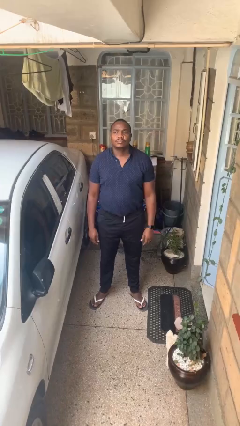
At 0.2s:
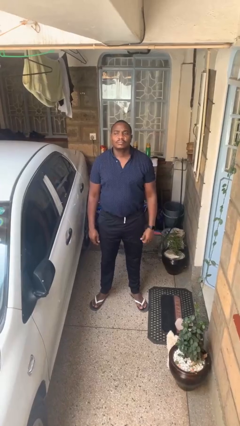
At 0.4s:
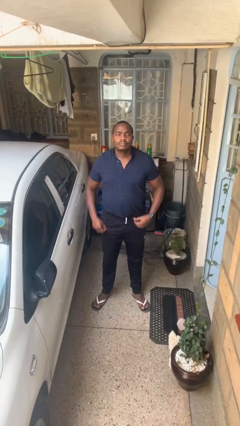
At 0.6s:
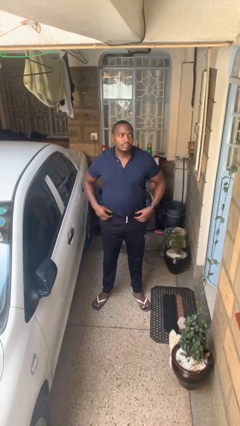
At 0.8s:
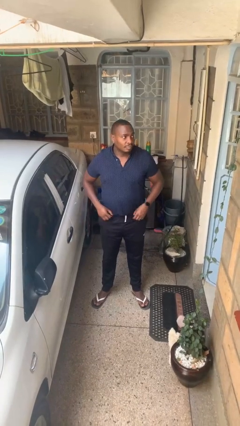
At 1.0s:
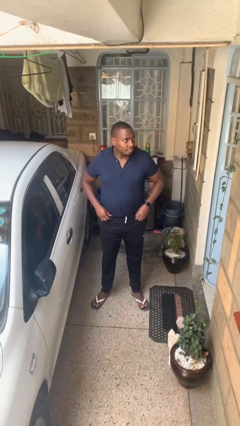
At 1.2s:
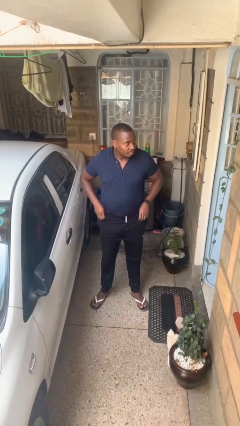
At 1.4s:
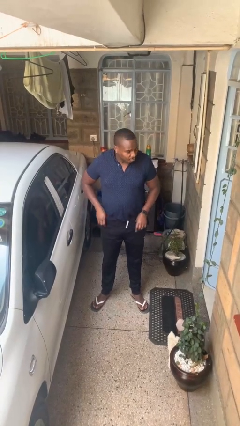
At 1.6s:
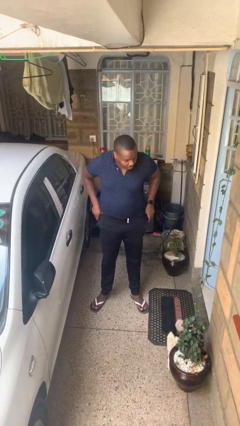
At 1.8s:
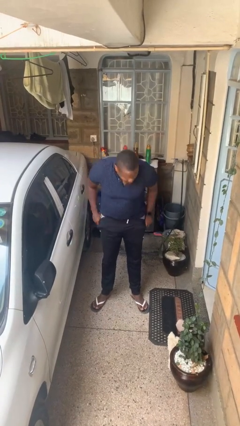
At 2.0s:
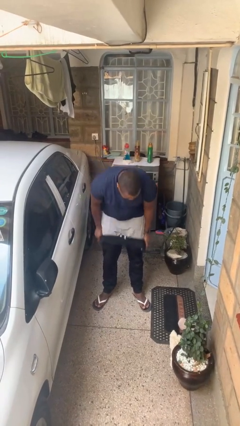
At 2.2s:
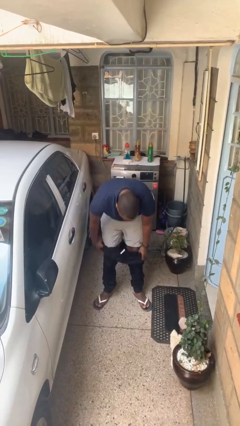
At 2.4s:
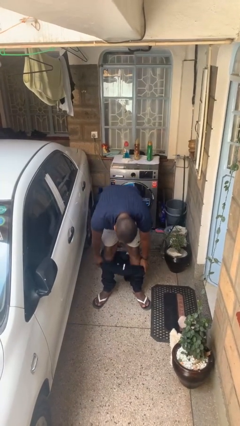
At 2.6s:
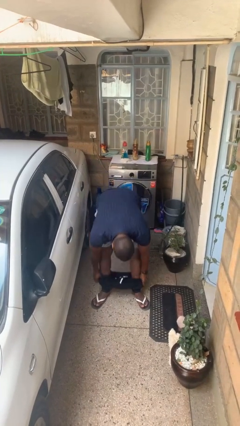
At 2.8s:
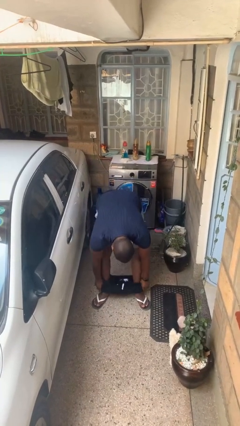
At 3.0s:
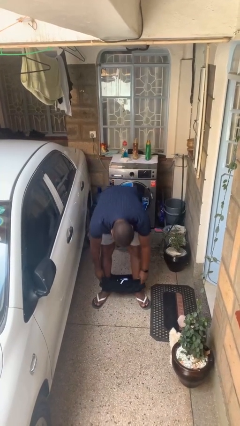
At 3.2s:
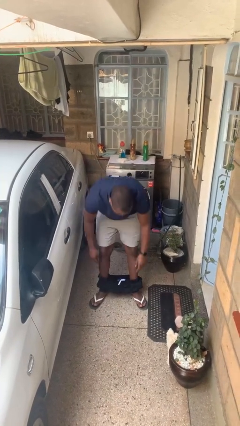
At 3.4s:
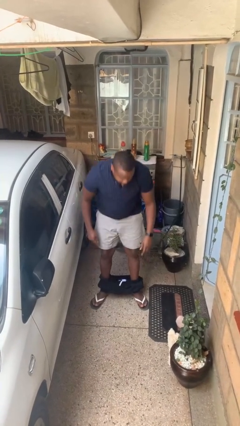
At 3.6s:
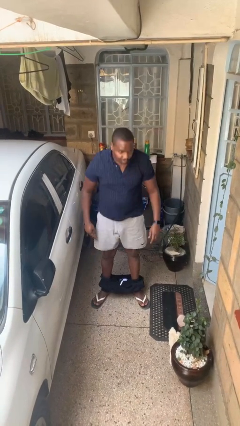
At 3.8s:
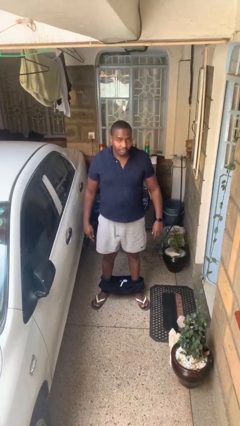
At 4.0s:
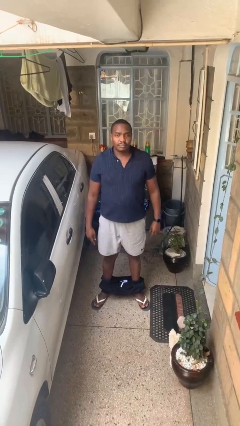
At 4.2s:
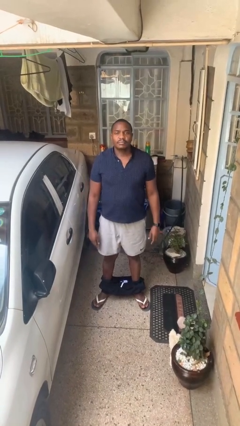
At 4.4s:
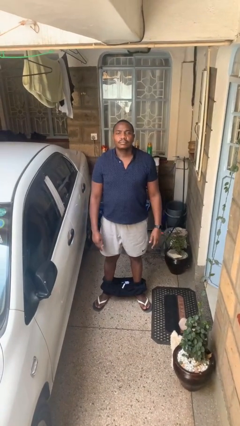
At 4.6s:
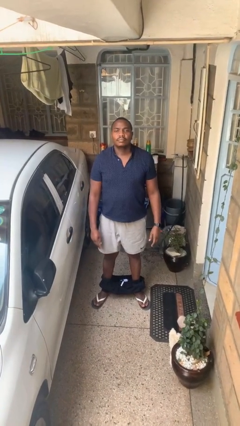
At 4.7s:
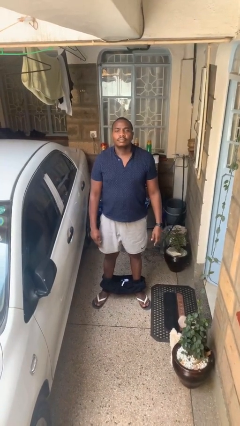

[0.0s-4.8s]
person takes off pants

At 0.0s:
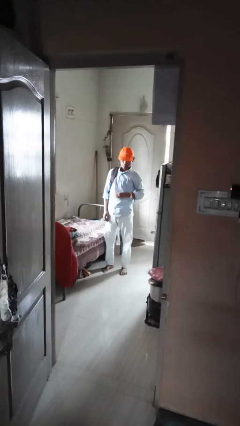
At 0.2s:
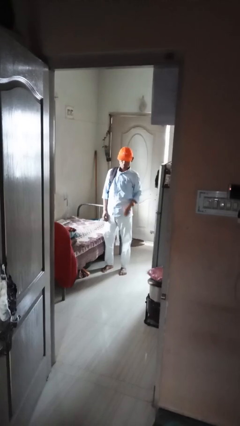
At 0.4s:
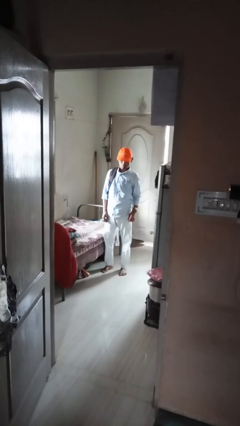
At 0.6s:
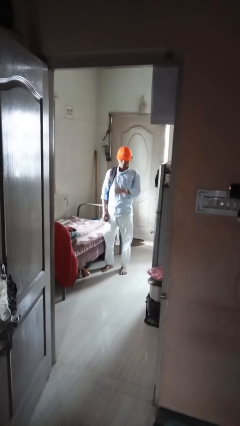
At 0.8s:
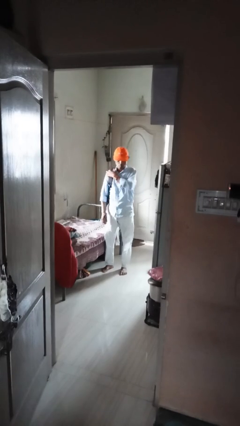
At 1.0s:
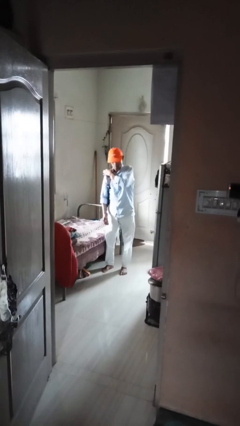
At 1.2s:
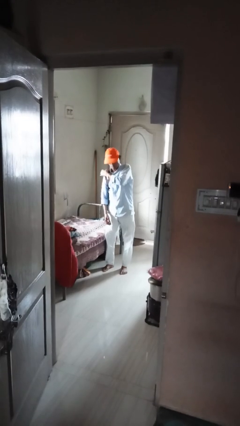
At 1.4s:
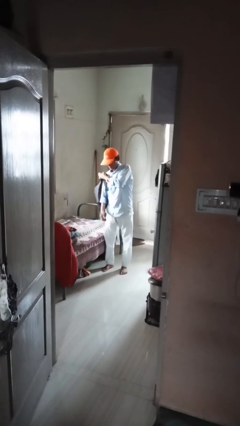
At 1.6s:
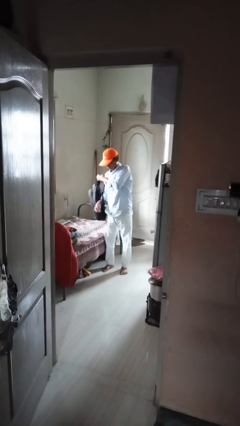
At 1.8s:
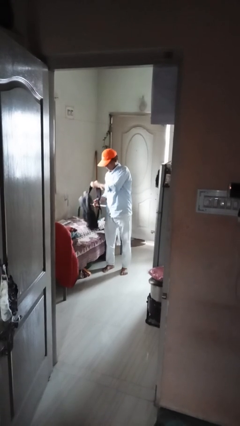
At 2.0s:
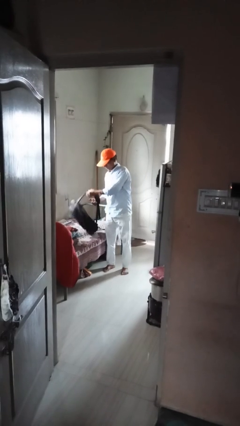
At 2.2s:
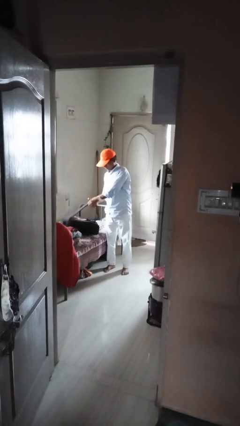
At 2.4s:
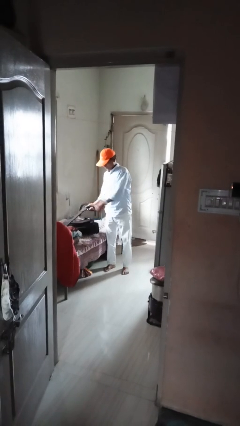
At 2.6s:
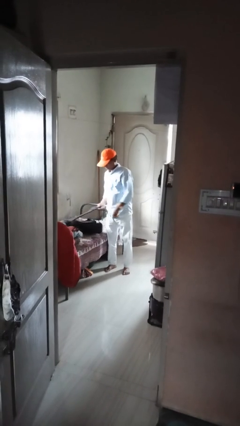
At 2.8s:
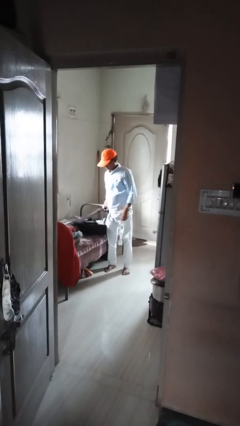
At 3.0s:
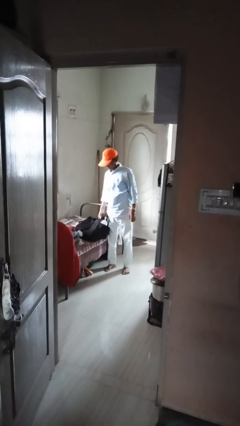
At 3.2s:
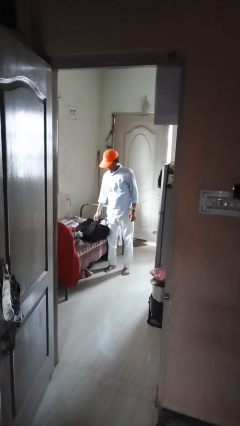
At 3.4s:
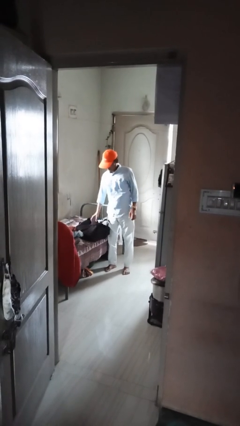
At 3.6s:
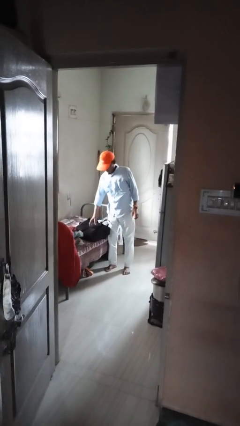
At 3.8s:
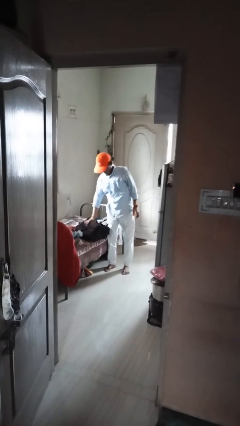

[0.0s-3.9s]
person takes off backpack

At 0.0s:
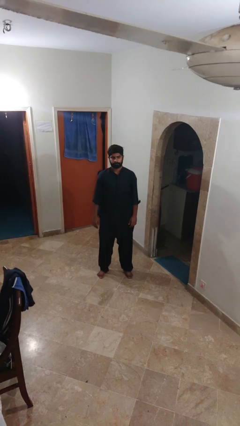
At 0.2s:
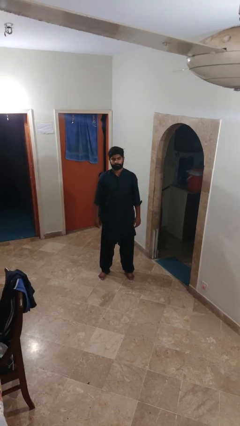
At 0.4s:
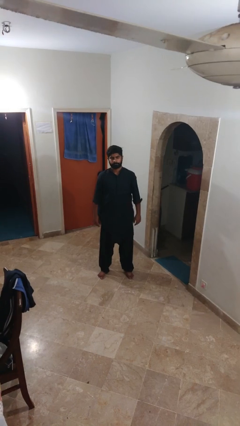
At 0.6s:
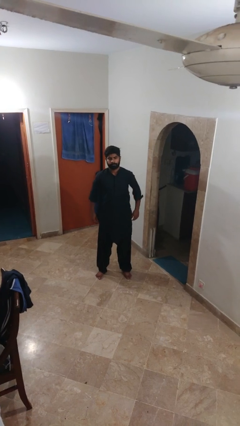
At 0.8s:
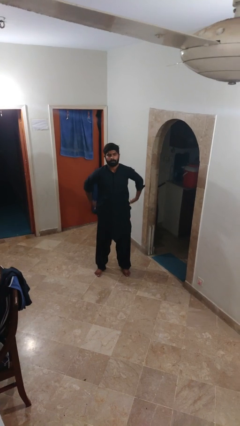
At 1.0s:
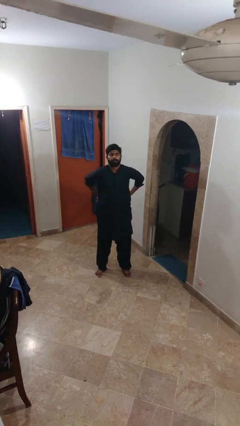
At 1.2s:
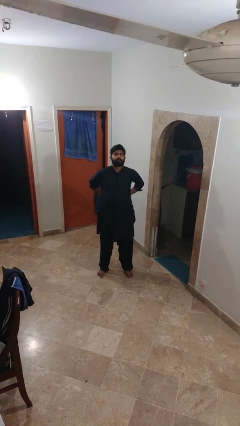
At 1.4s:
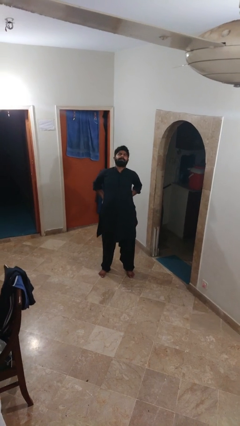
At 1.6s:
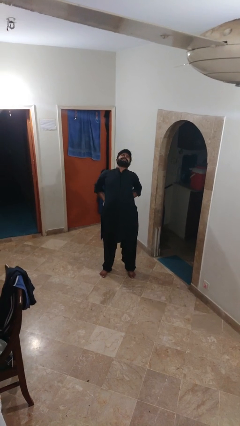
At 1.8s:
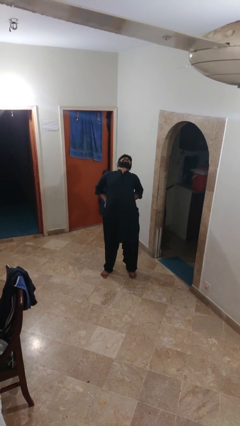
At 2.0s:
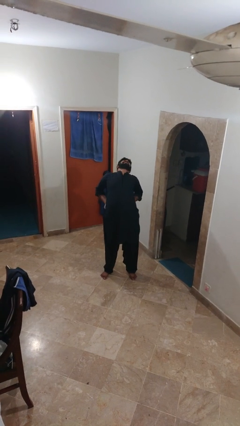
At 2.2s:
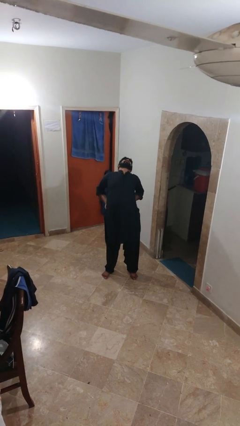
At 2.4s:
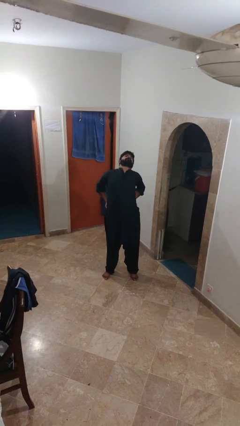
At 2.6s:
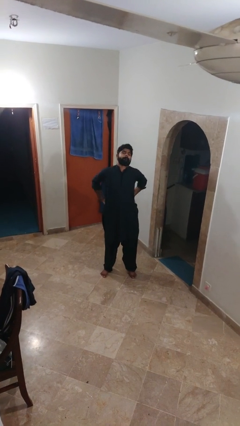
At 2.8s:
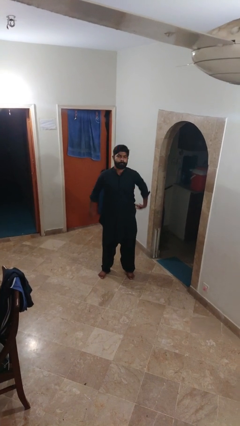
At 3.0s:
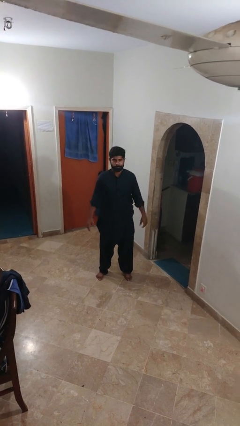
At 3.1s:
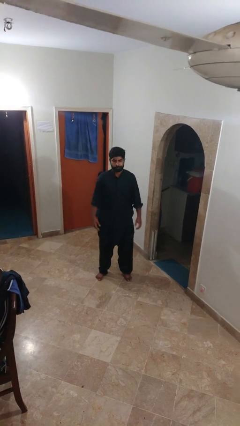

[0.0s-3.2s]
person stretches back

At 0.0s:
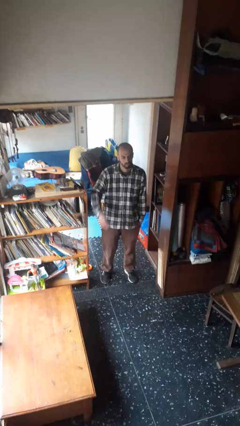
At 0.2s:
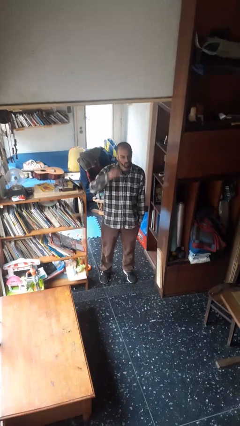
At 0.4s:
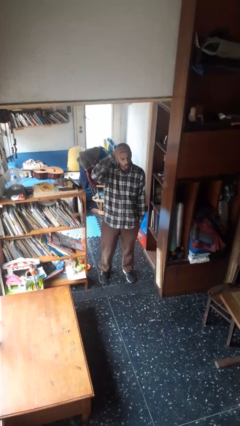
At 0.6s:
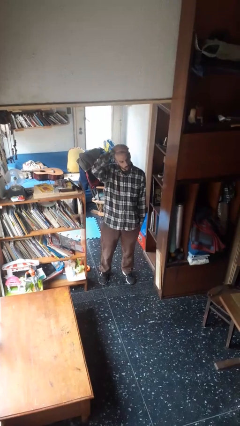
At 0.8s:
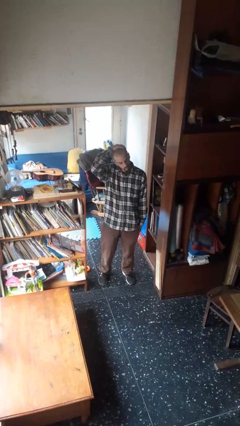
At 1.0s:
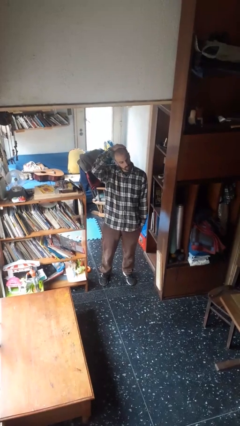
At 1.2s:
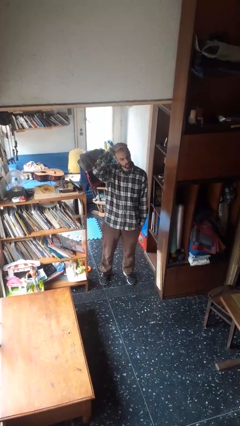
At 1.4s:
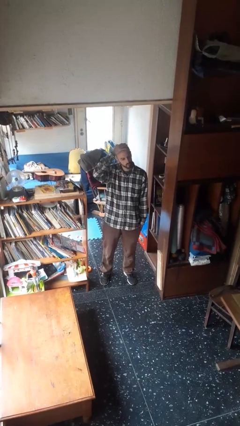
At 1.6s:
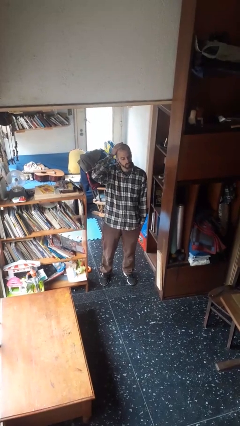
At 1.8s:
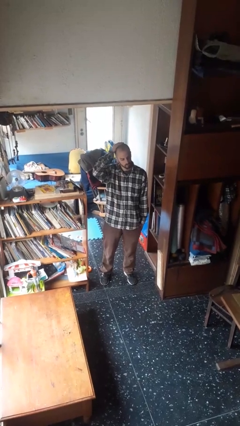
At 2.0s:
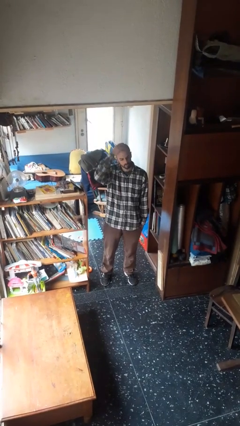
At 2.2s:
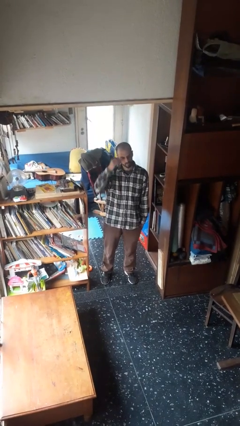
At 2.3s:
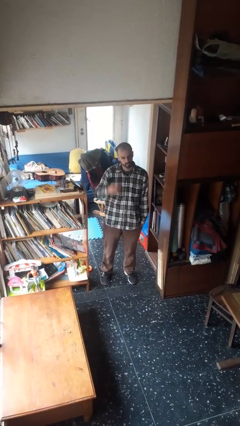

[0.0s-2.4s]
person pats head

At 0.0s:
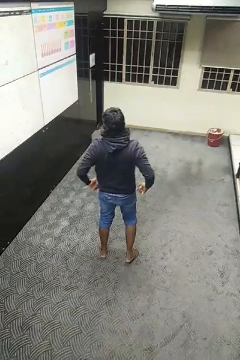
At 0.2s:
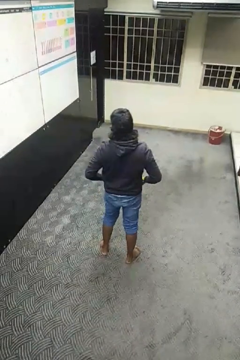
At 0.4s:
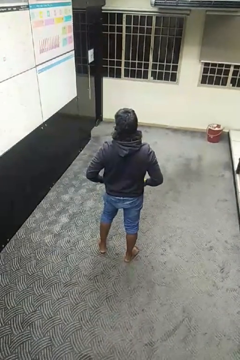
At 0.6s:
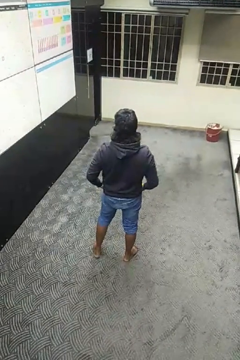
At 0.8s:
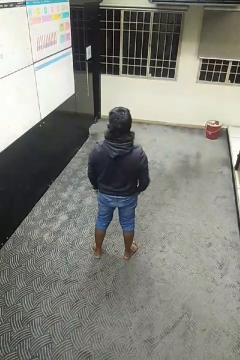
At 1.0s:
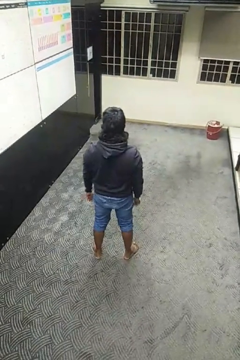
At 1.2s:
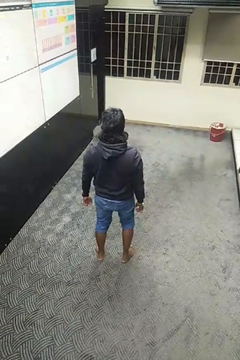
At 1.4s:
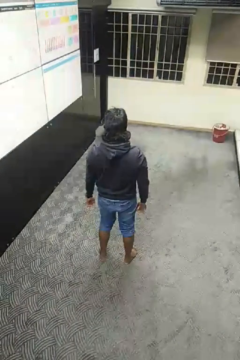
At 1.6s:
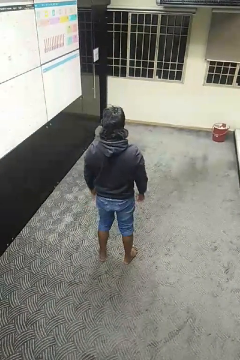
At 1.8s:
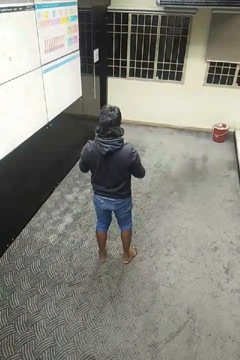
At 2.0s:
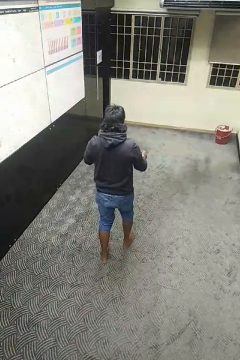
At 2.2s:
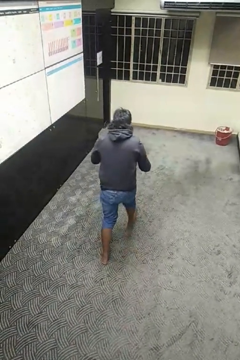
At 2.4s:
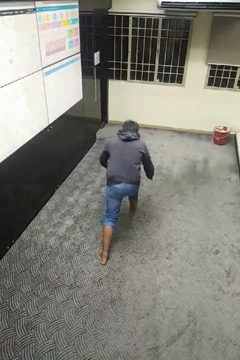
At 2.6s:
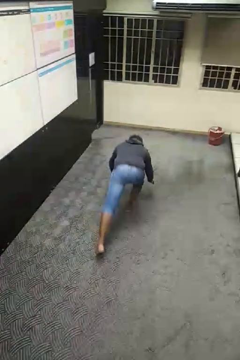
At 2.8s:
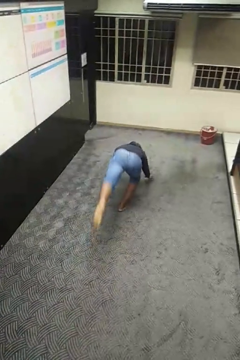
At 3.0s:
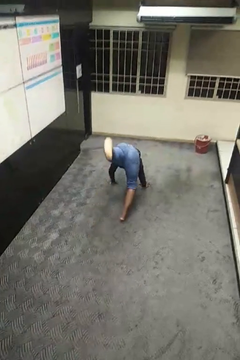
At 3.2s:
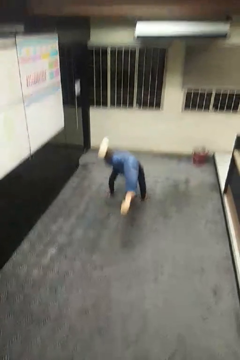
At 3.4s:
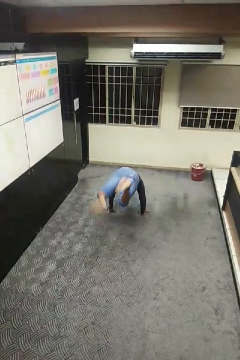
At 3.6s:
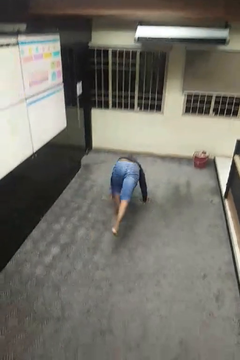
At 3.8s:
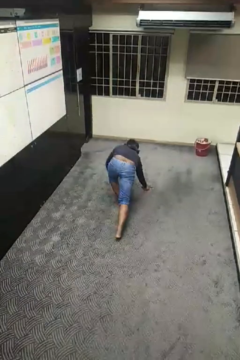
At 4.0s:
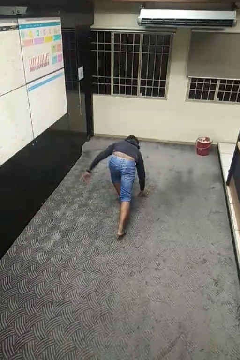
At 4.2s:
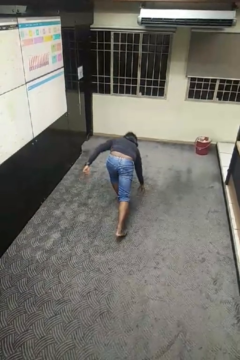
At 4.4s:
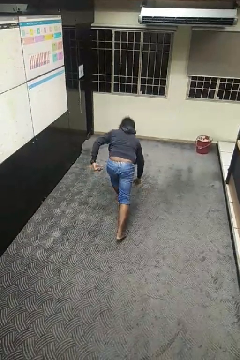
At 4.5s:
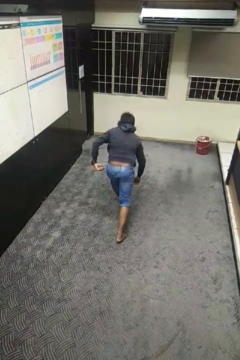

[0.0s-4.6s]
person handstand
